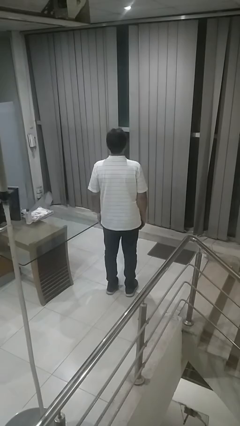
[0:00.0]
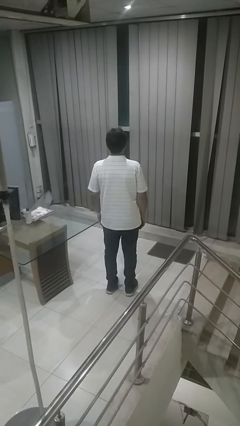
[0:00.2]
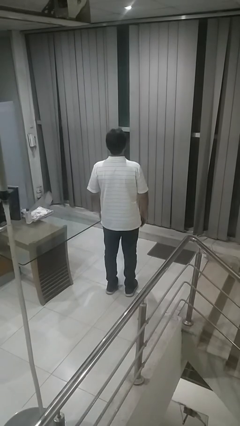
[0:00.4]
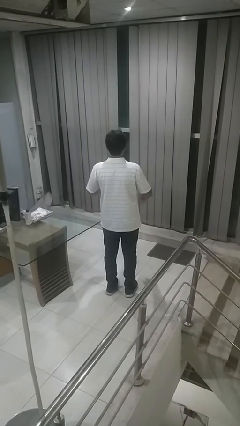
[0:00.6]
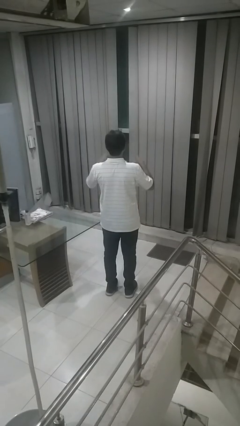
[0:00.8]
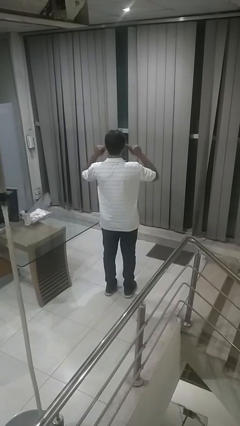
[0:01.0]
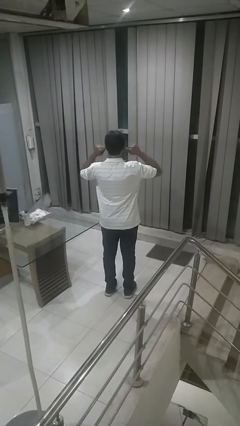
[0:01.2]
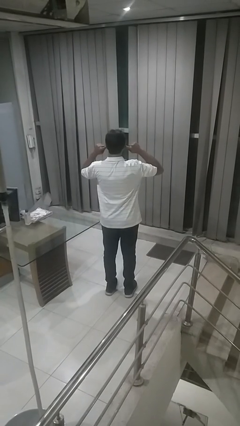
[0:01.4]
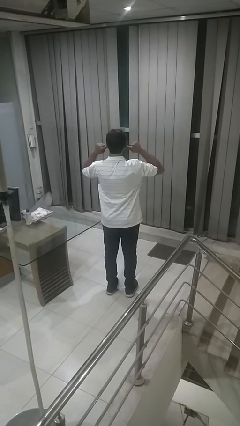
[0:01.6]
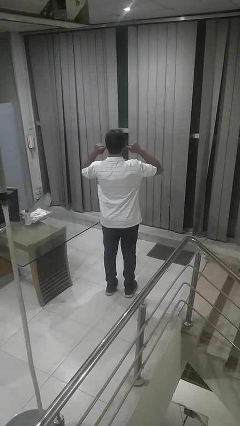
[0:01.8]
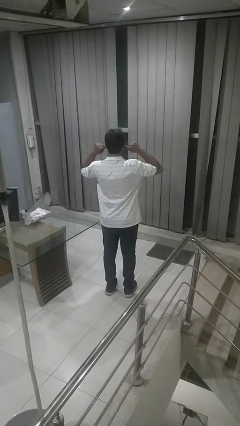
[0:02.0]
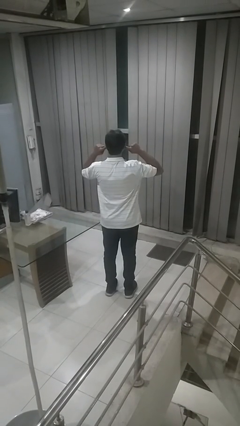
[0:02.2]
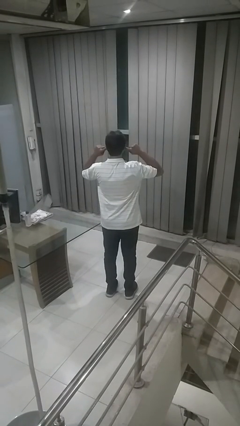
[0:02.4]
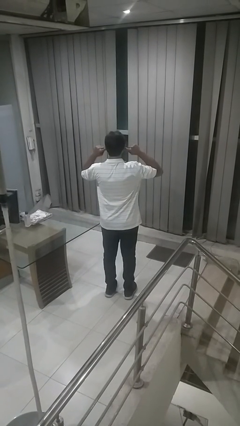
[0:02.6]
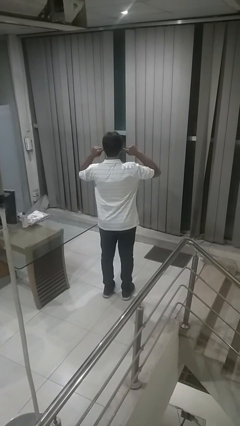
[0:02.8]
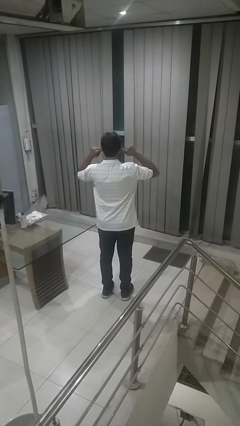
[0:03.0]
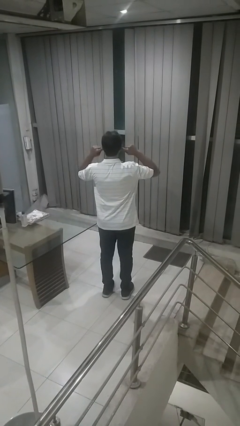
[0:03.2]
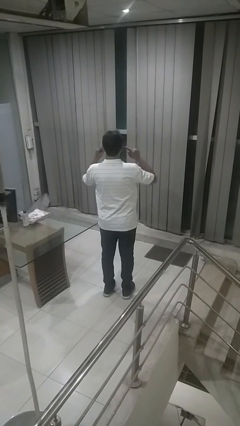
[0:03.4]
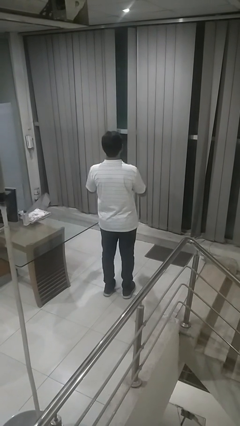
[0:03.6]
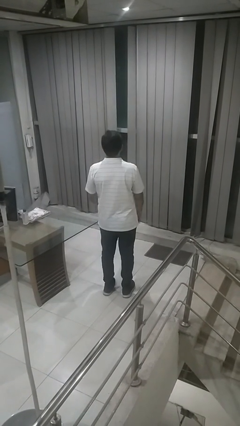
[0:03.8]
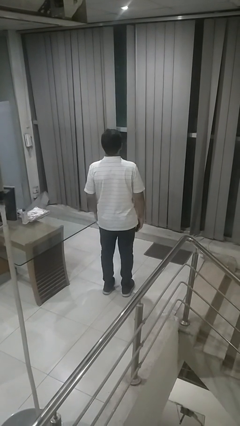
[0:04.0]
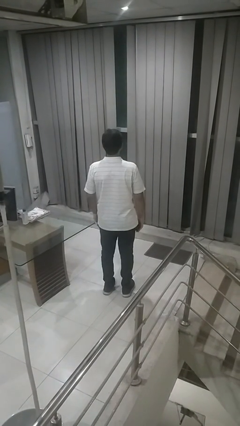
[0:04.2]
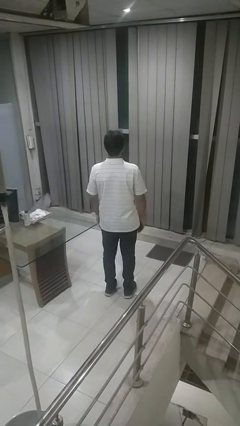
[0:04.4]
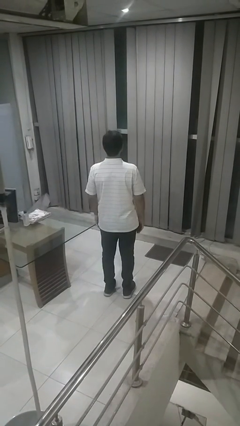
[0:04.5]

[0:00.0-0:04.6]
person puts fingers in ear

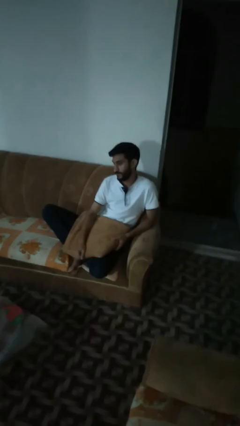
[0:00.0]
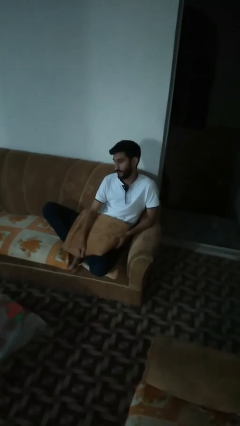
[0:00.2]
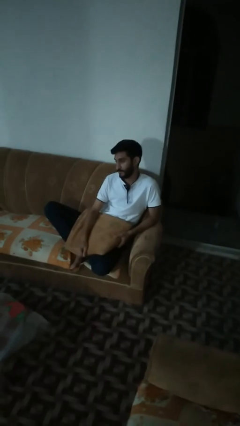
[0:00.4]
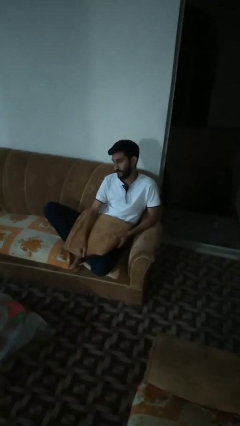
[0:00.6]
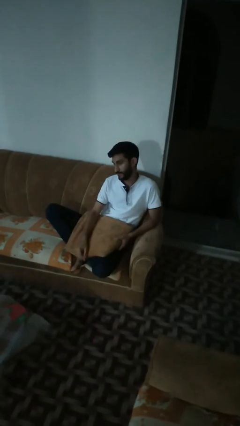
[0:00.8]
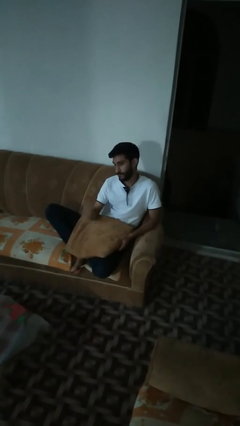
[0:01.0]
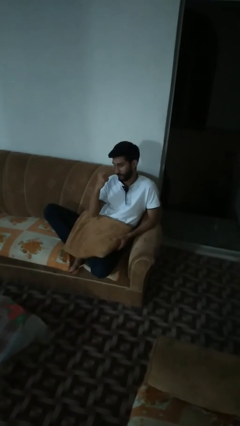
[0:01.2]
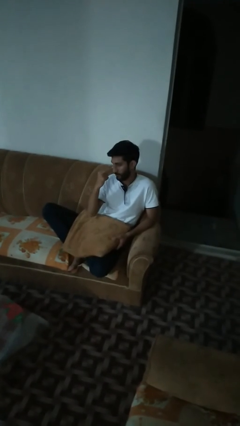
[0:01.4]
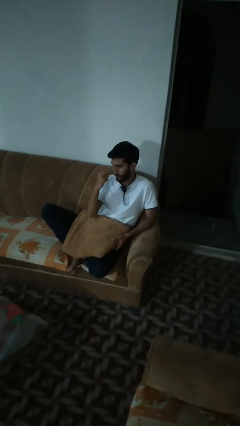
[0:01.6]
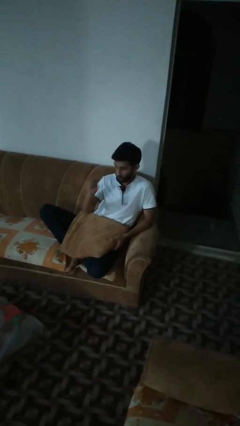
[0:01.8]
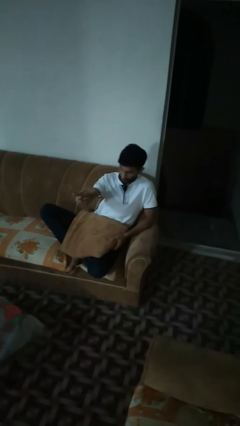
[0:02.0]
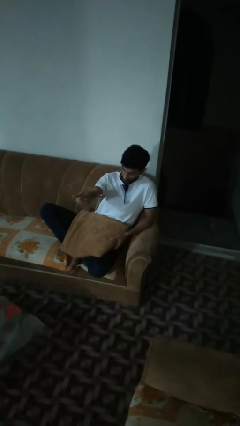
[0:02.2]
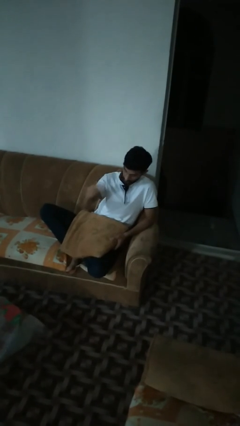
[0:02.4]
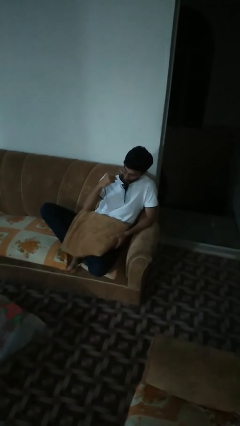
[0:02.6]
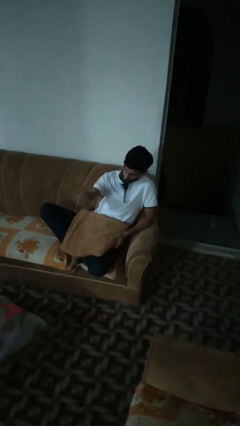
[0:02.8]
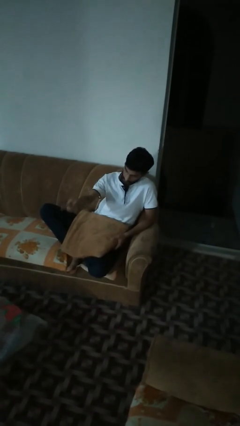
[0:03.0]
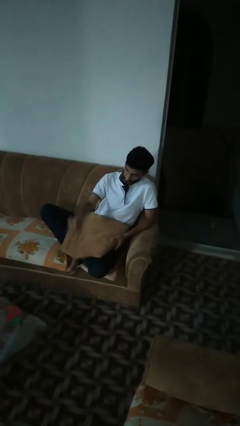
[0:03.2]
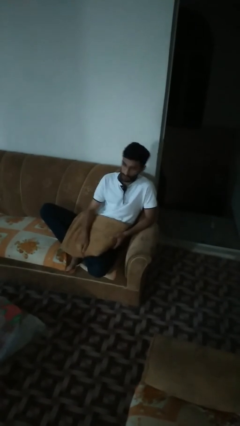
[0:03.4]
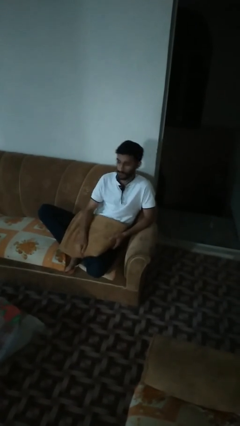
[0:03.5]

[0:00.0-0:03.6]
person gestures watch closely

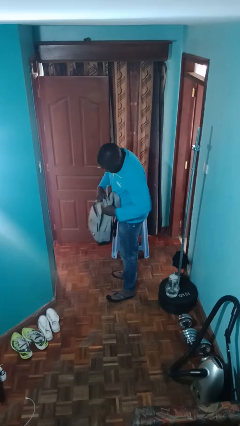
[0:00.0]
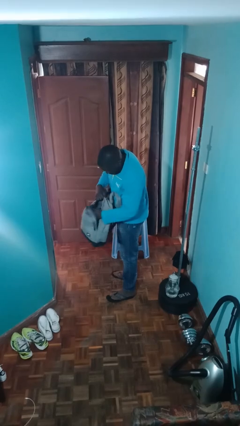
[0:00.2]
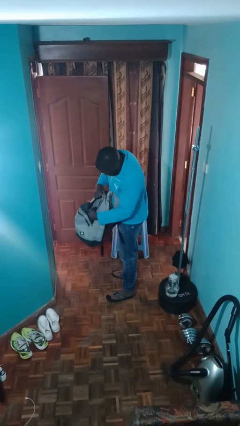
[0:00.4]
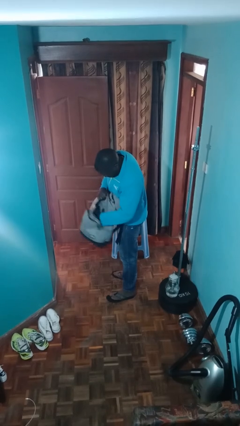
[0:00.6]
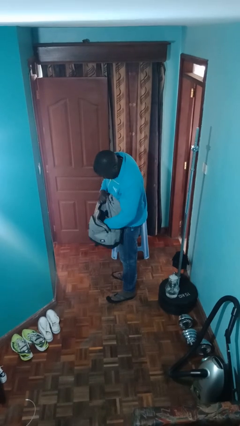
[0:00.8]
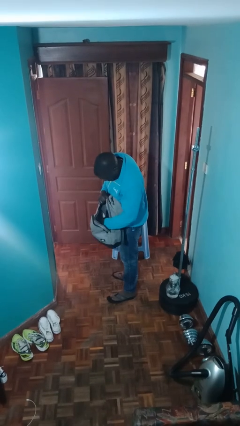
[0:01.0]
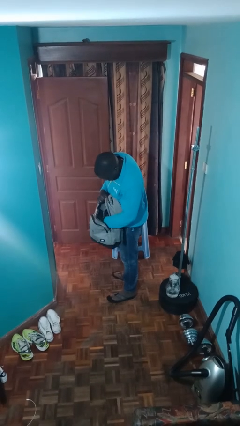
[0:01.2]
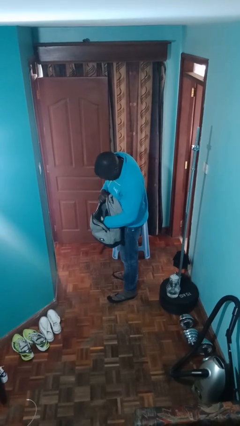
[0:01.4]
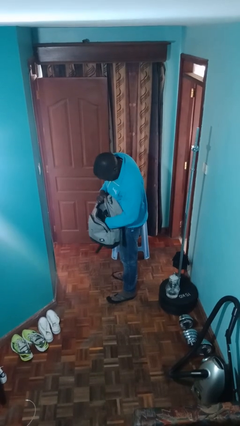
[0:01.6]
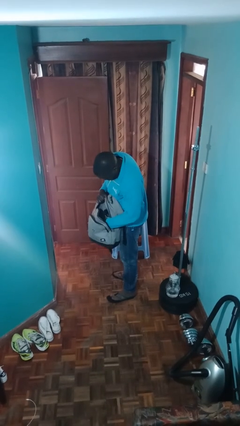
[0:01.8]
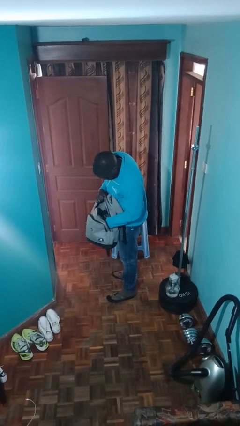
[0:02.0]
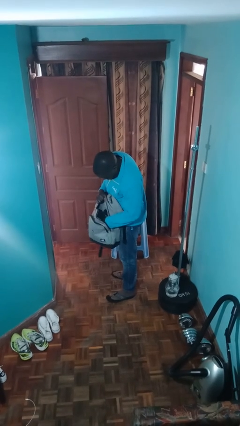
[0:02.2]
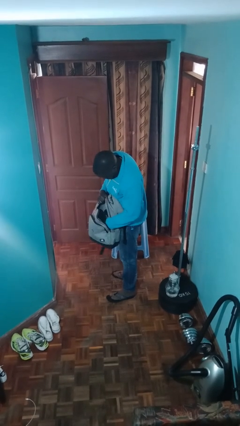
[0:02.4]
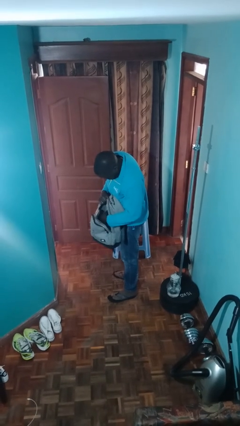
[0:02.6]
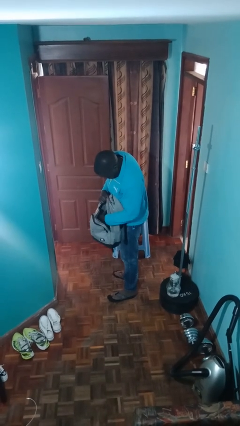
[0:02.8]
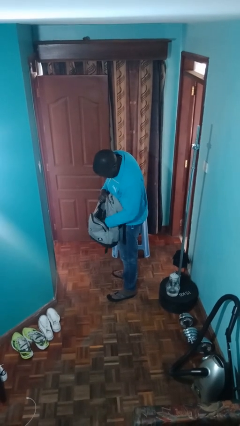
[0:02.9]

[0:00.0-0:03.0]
person searches in backpack

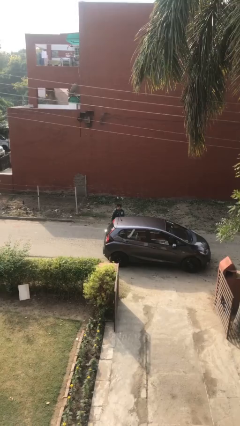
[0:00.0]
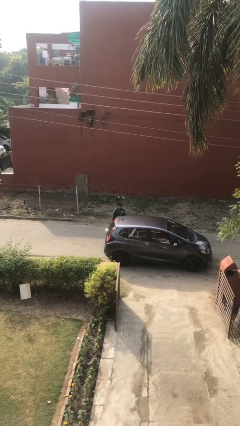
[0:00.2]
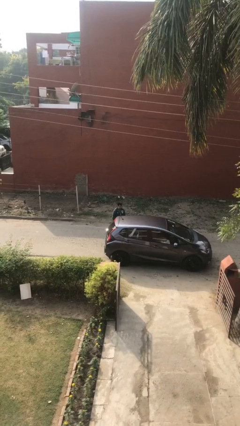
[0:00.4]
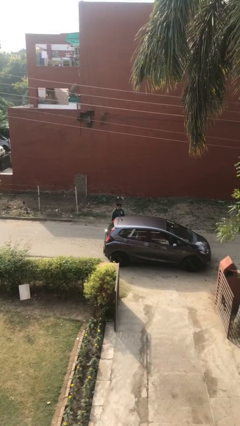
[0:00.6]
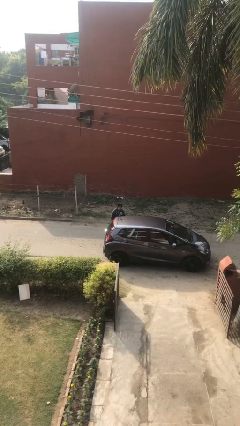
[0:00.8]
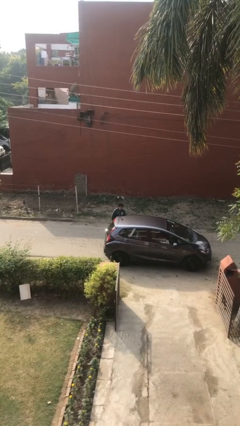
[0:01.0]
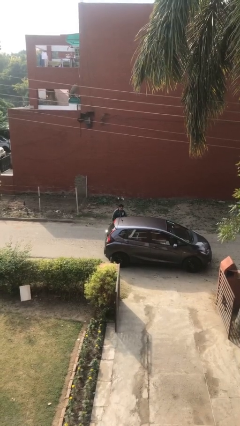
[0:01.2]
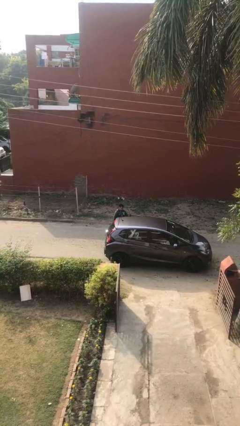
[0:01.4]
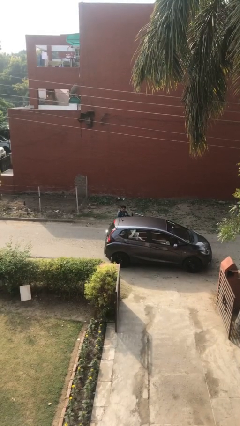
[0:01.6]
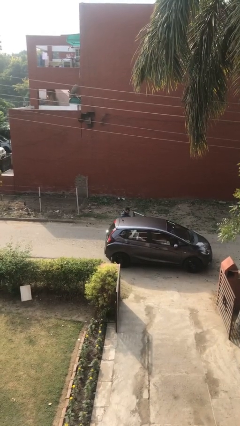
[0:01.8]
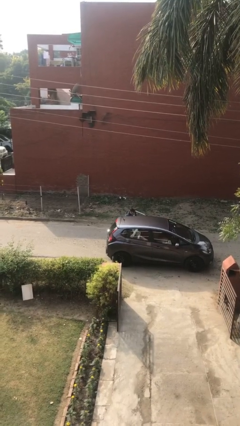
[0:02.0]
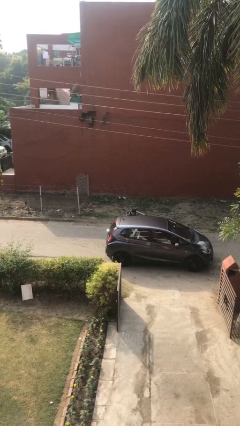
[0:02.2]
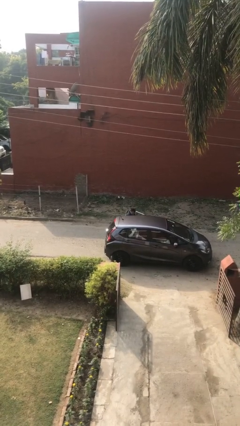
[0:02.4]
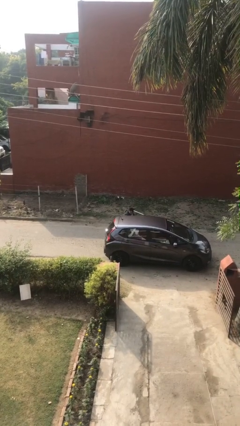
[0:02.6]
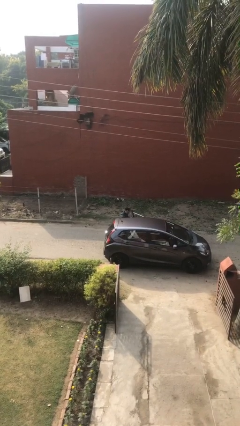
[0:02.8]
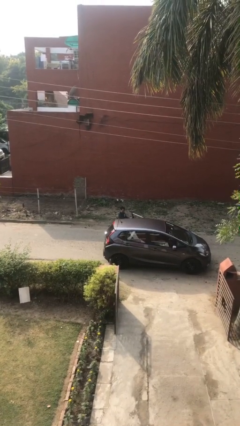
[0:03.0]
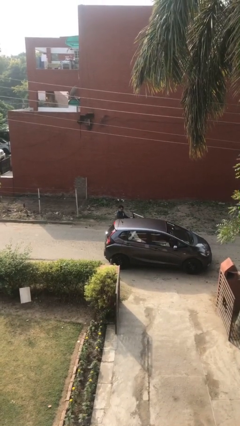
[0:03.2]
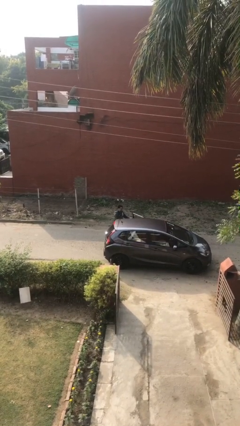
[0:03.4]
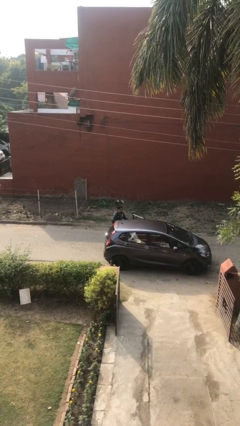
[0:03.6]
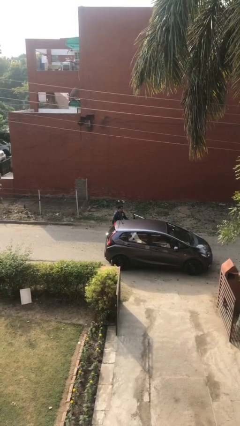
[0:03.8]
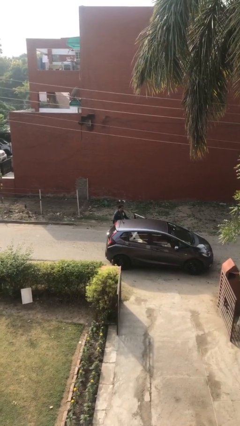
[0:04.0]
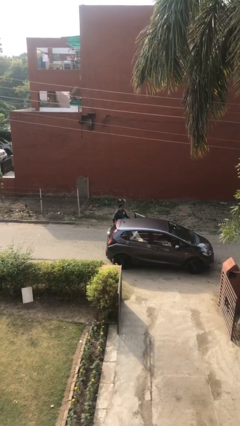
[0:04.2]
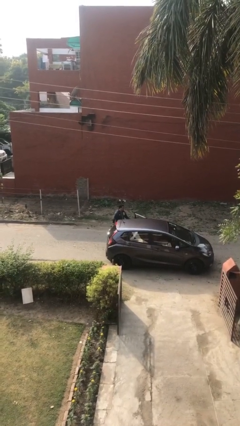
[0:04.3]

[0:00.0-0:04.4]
person unloads car

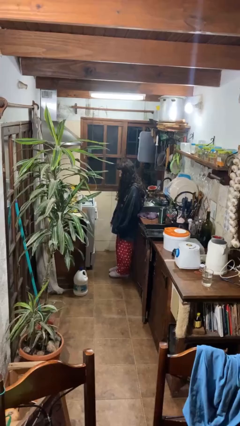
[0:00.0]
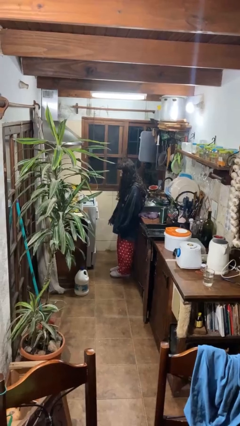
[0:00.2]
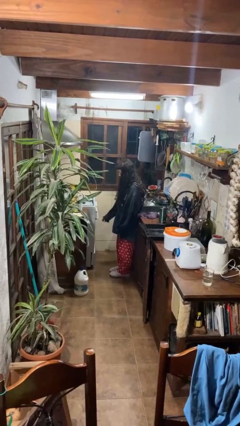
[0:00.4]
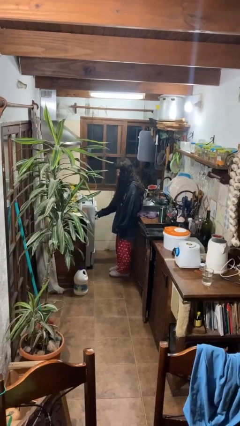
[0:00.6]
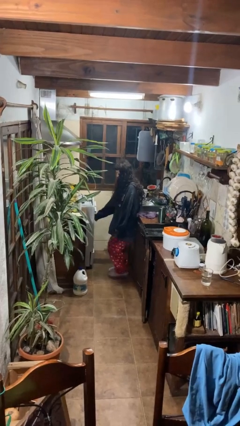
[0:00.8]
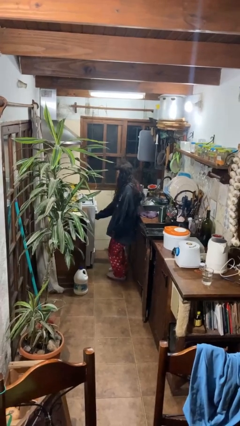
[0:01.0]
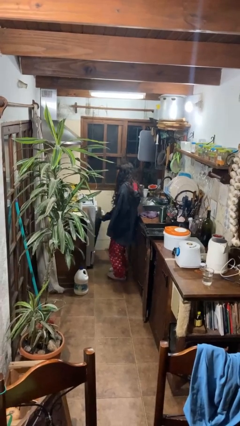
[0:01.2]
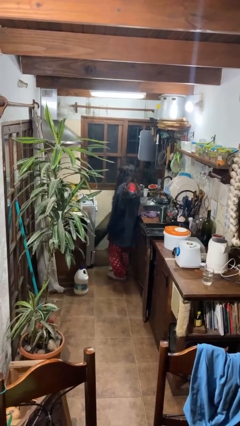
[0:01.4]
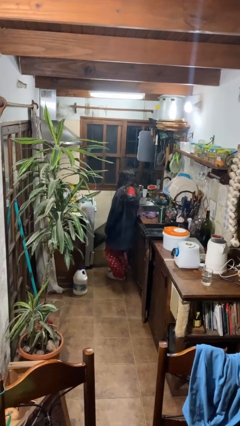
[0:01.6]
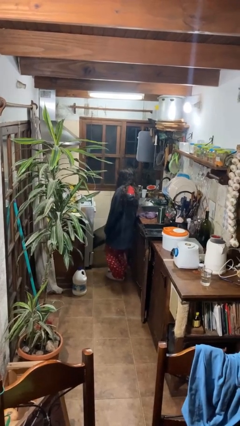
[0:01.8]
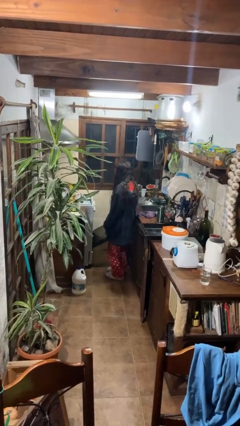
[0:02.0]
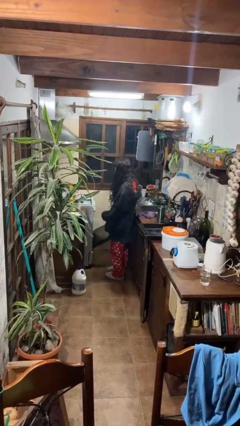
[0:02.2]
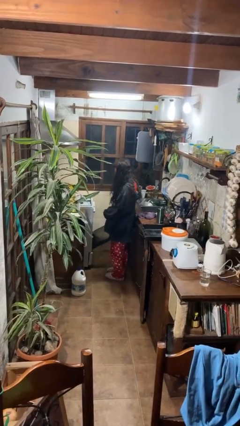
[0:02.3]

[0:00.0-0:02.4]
person opens oven door
